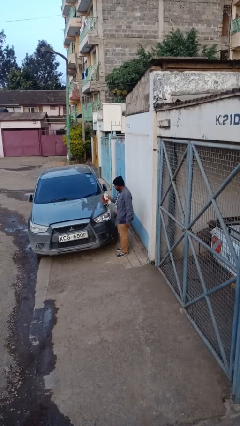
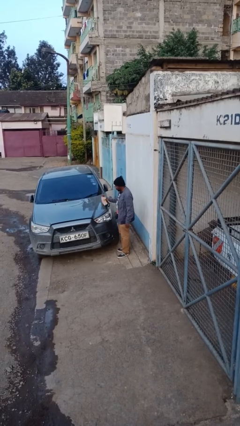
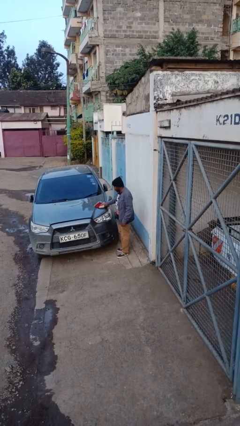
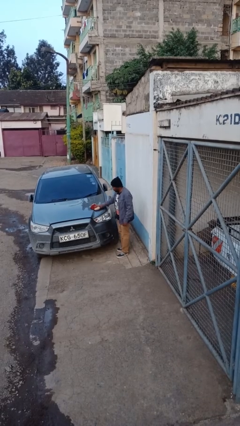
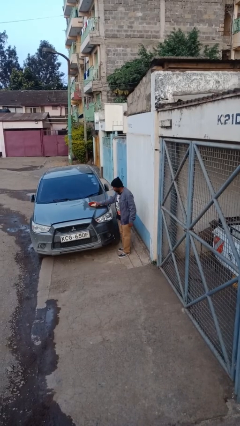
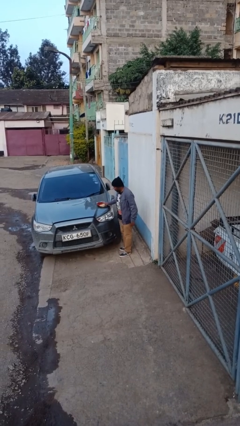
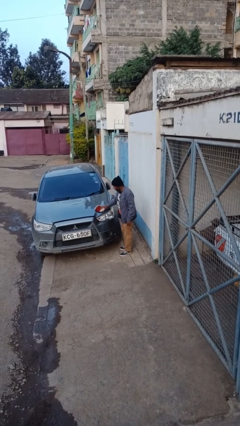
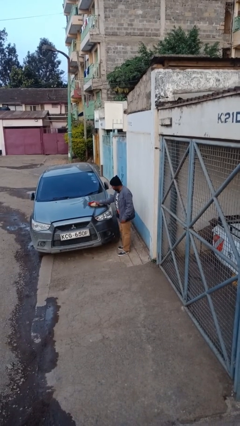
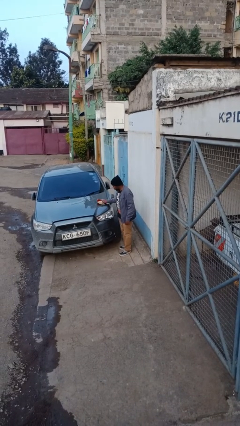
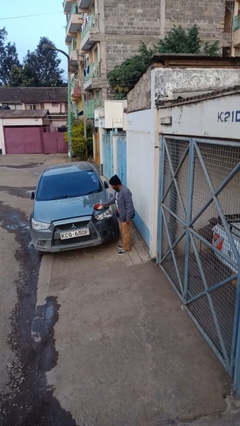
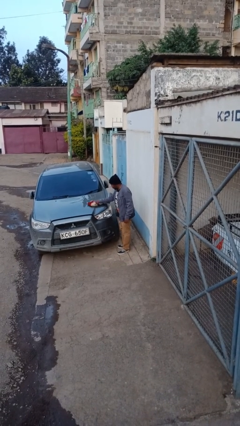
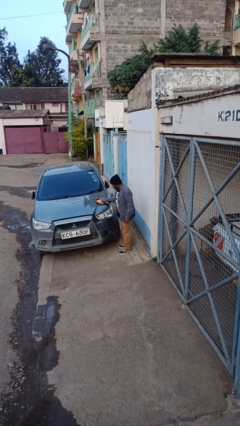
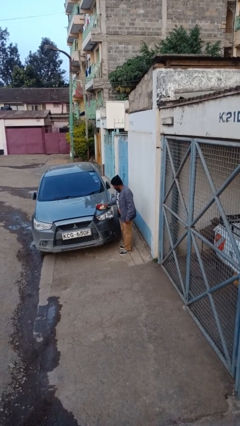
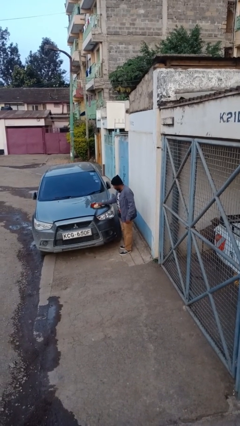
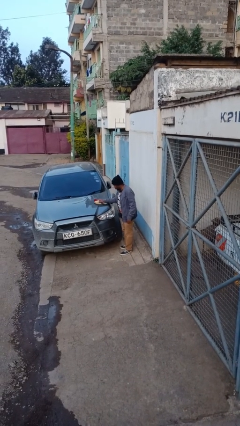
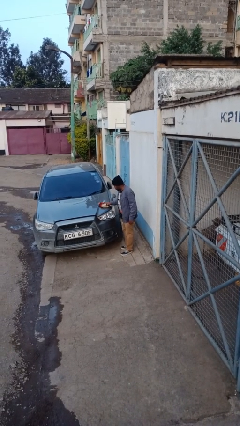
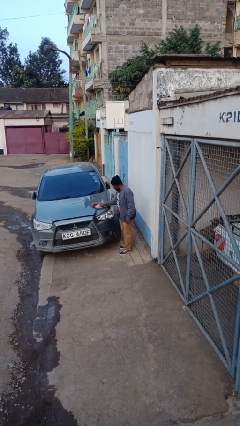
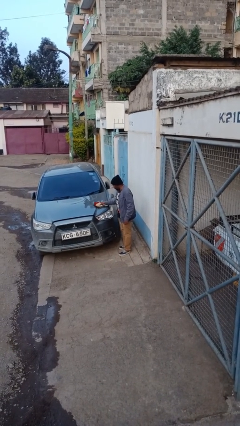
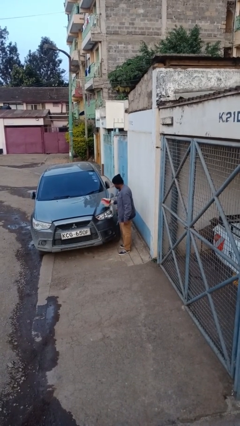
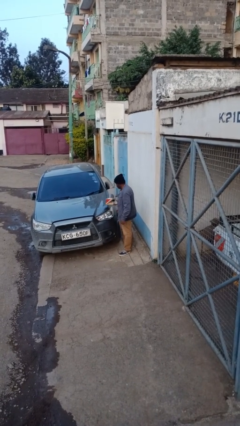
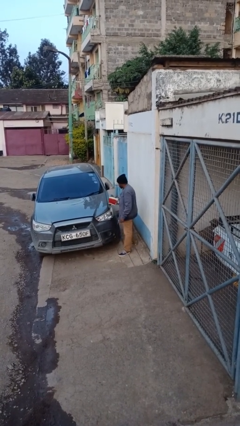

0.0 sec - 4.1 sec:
person polishes car with rag

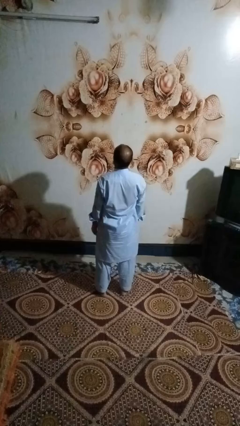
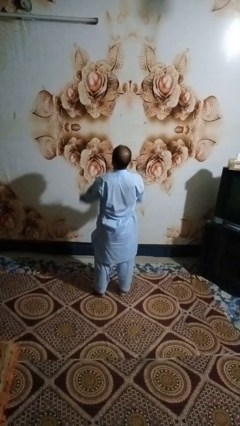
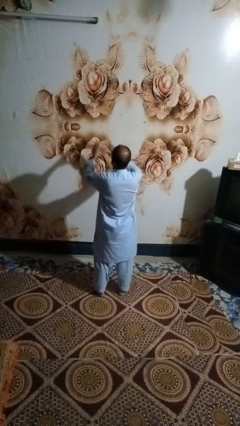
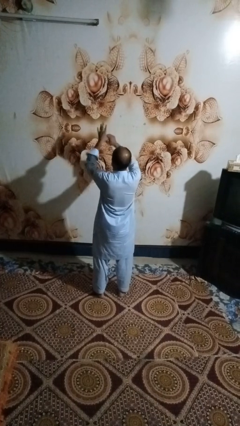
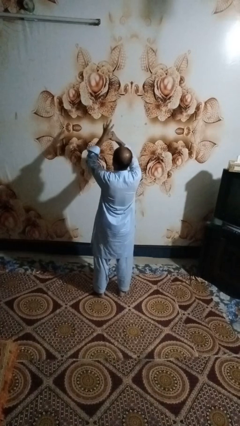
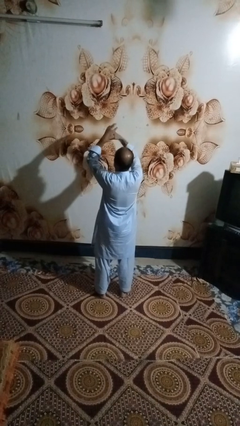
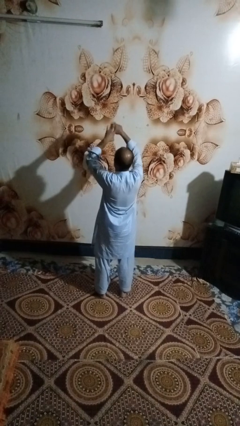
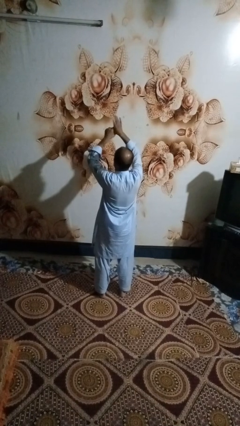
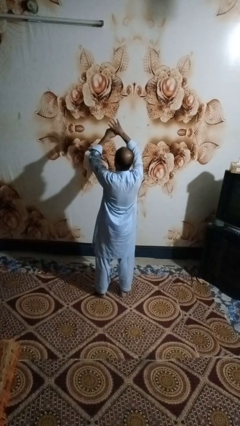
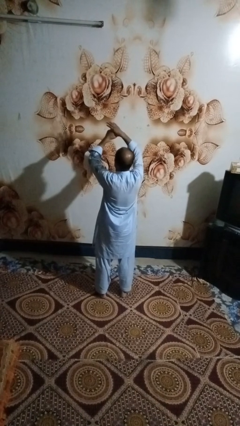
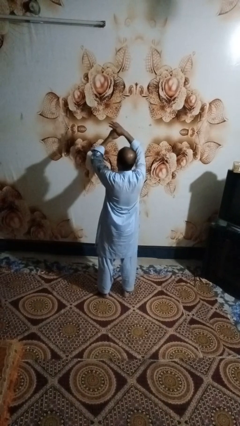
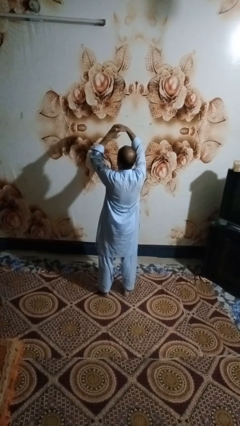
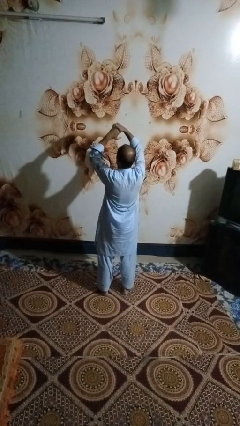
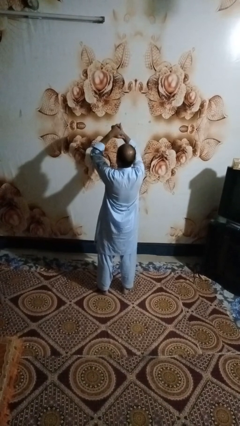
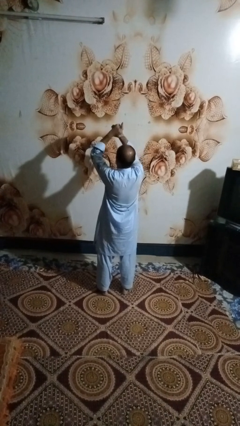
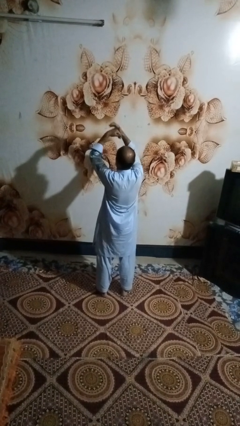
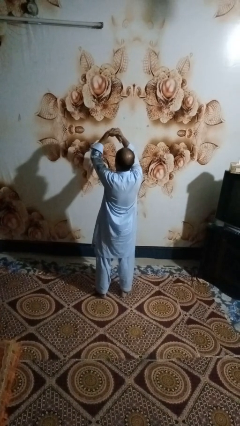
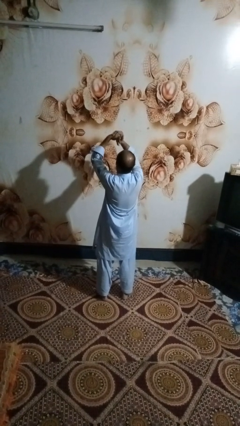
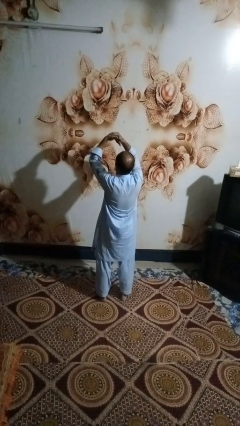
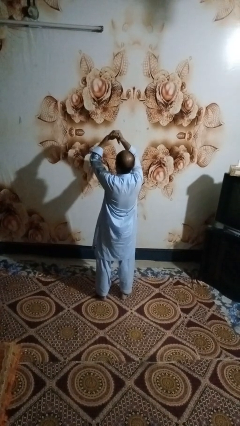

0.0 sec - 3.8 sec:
person cracks knuckles

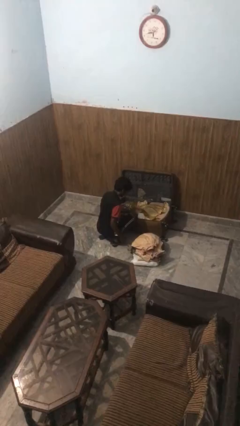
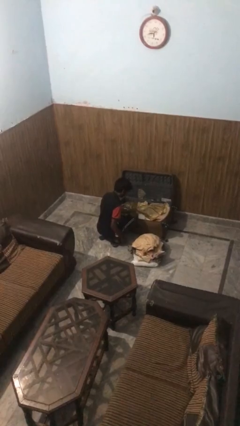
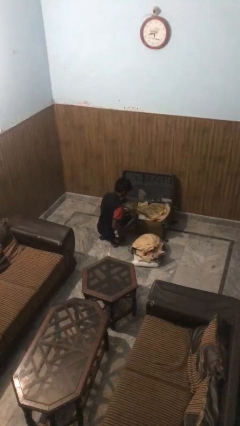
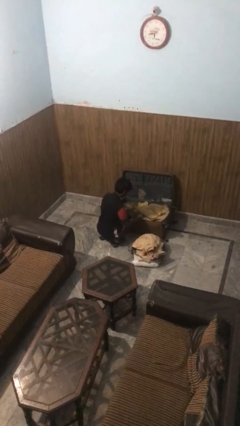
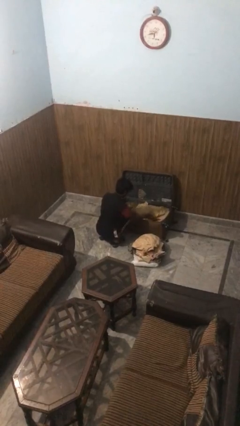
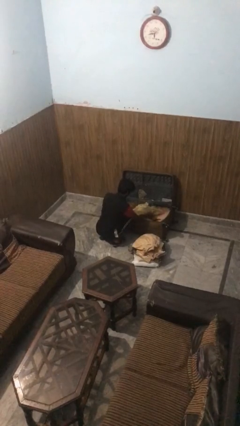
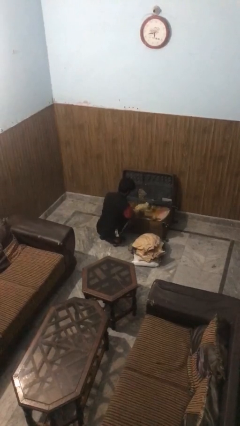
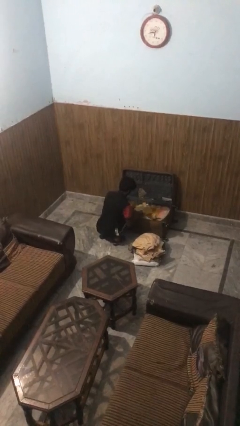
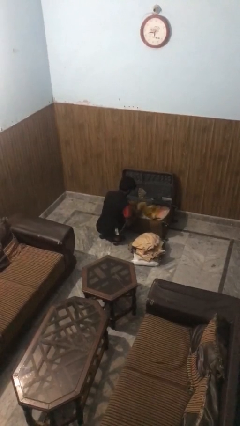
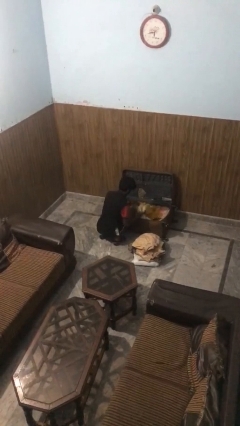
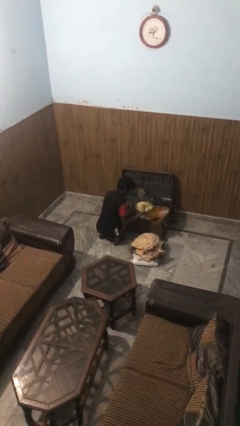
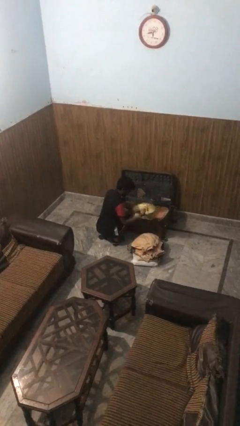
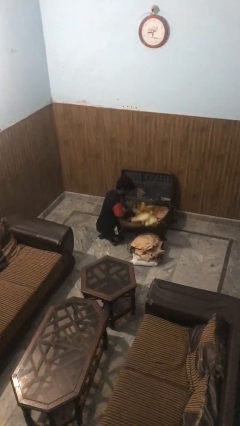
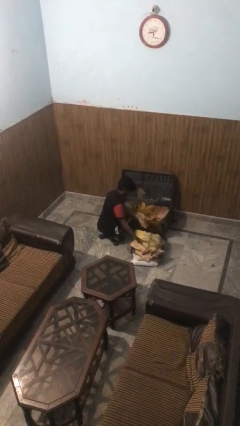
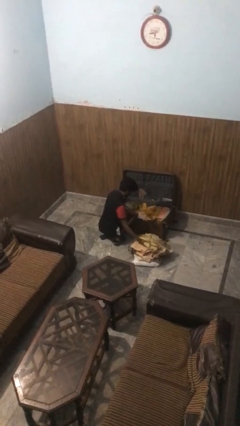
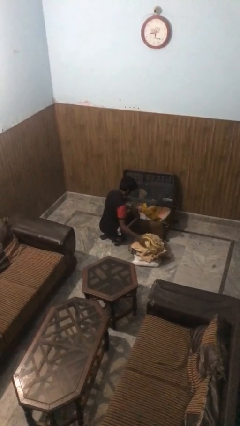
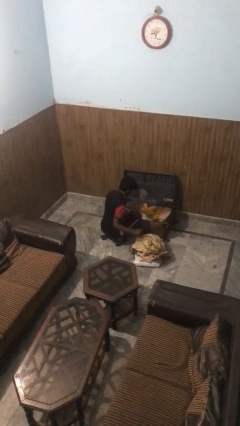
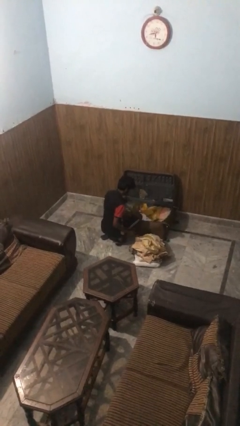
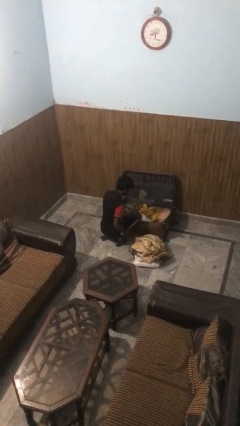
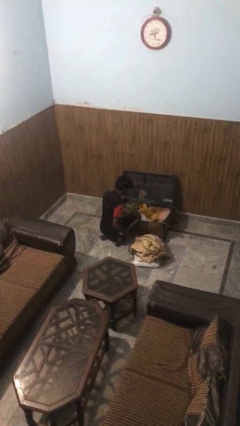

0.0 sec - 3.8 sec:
person unloads clothes from suitcase

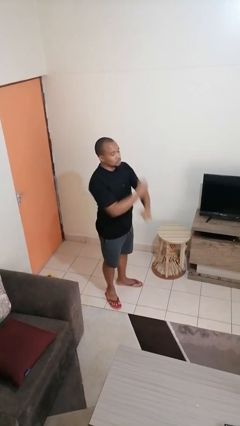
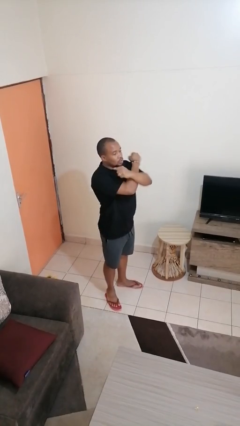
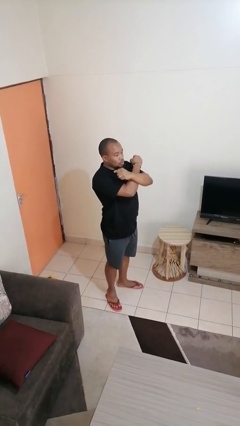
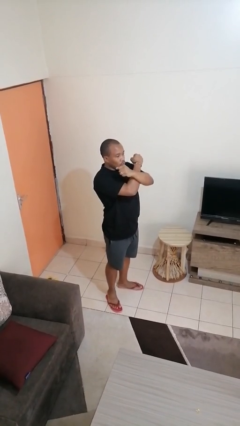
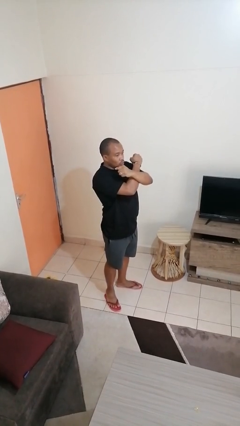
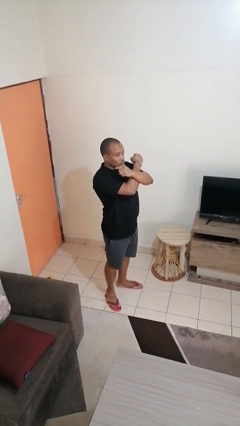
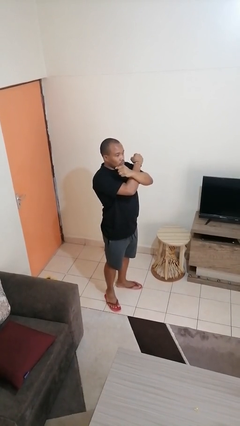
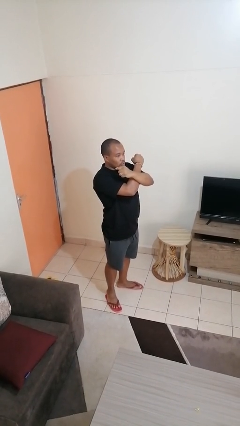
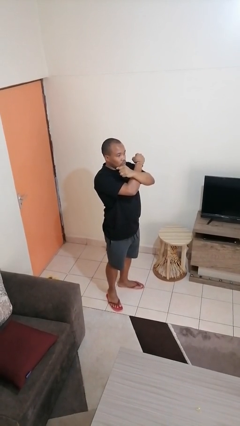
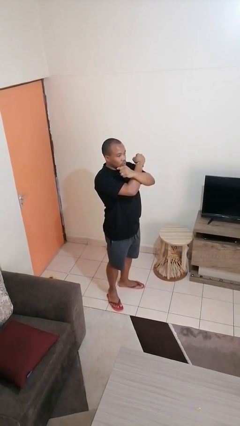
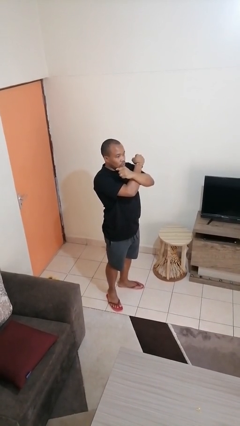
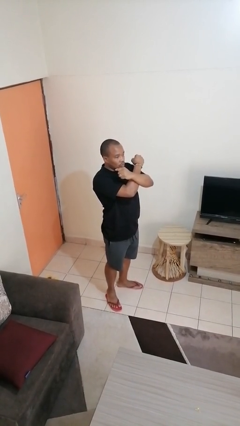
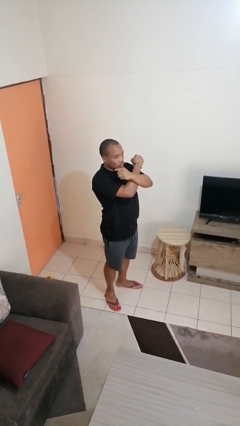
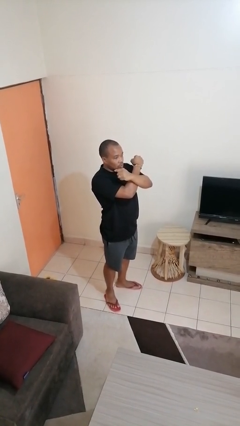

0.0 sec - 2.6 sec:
person gestures arms x

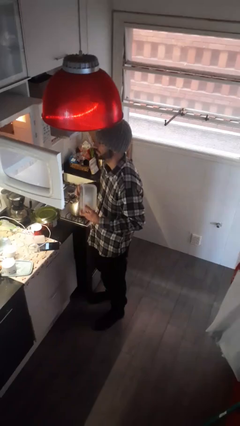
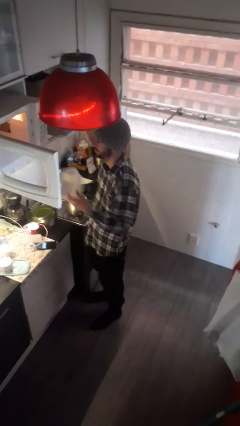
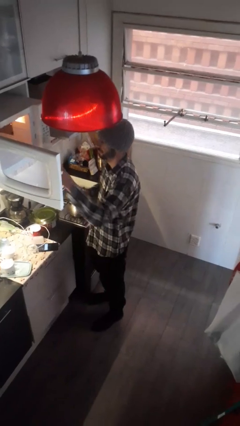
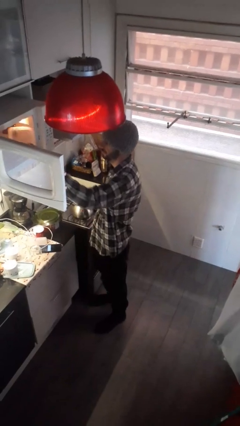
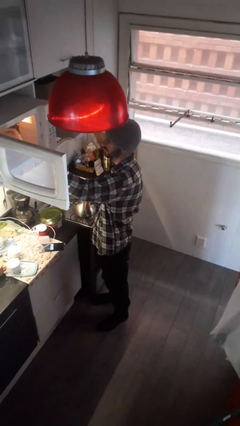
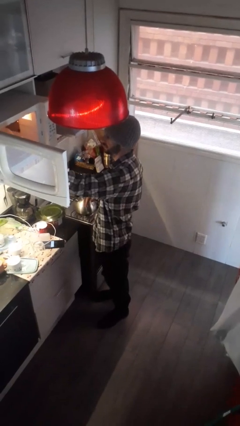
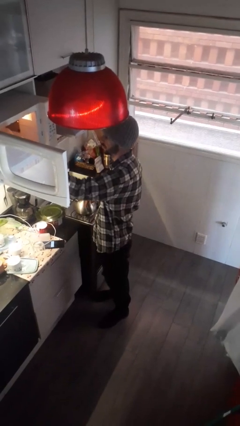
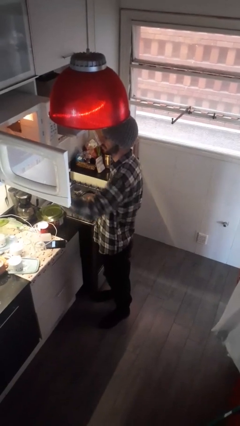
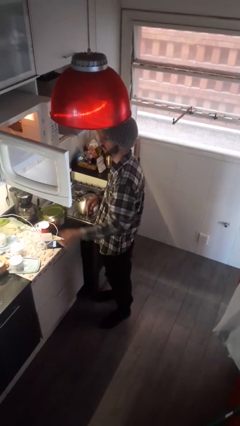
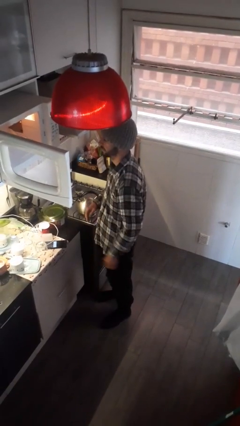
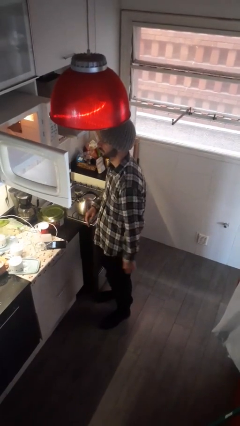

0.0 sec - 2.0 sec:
person puts object into microwave

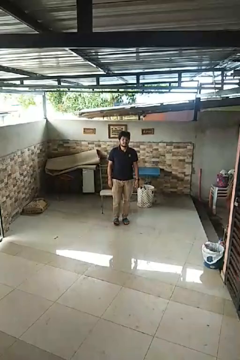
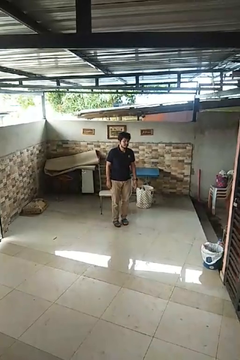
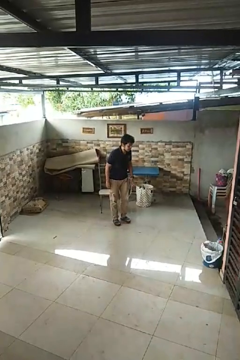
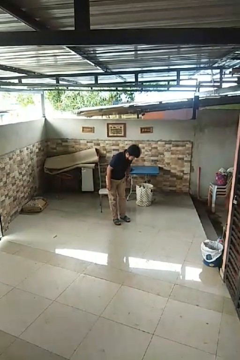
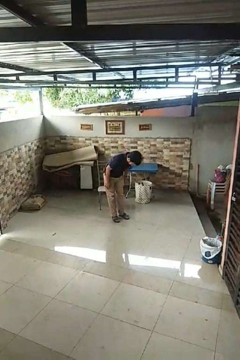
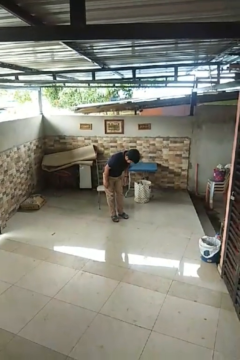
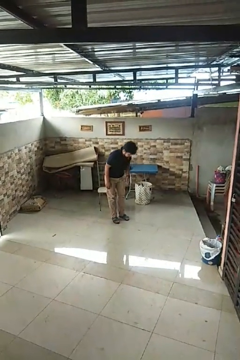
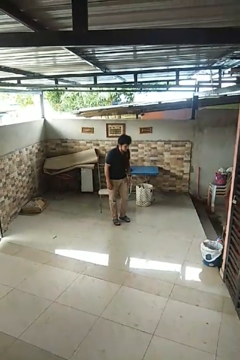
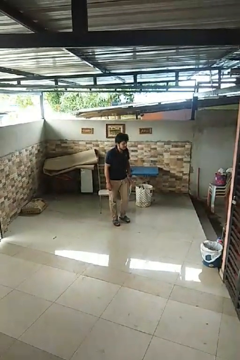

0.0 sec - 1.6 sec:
person bows
